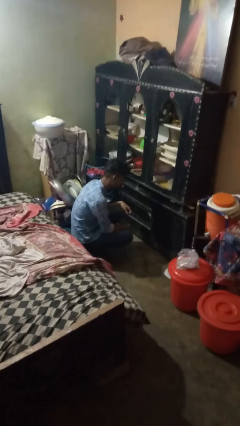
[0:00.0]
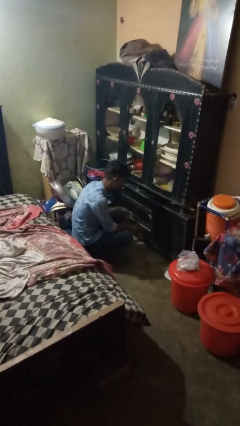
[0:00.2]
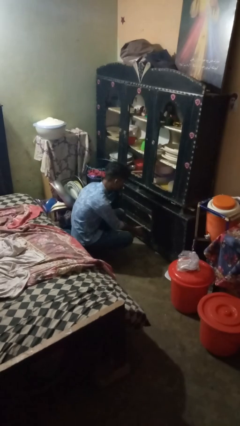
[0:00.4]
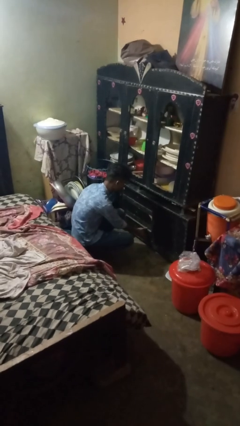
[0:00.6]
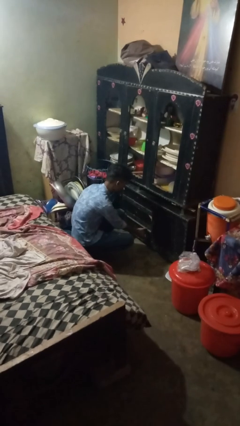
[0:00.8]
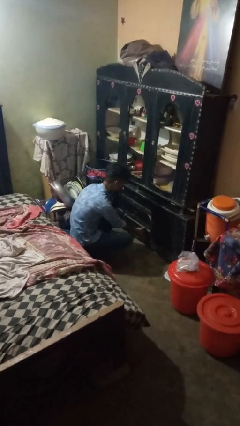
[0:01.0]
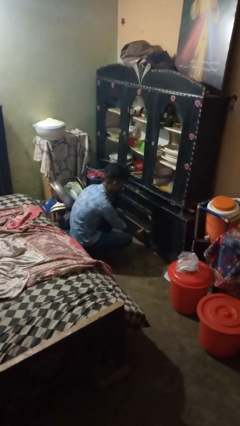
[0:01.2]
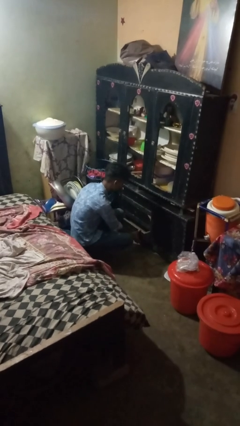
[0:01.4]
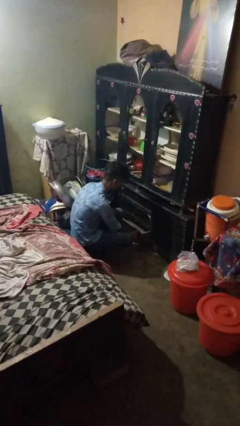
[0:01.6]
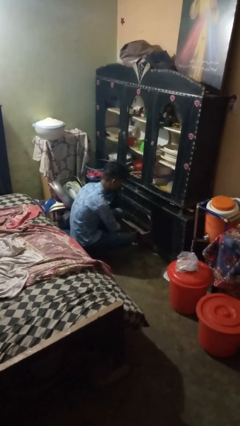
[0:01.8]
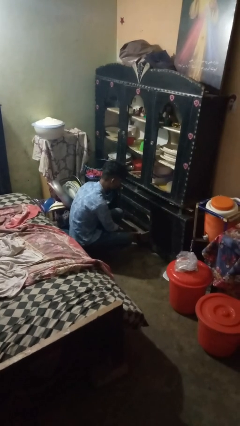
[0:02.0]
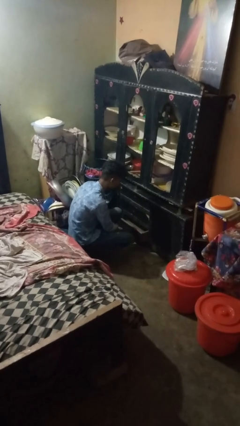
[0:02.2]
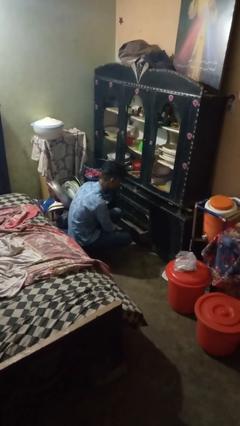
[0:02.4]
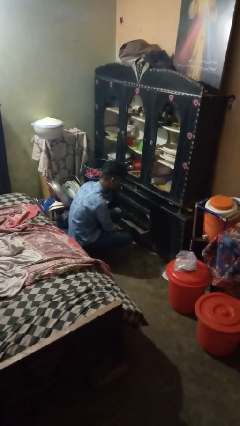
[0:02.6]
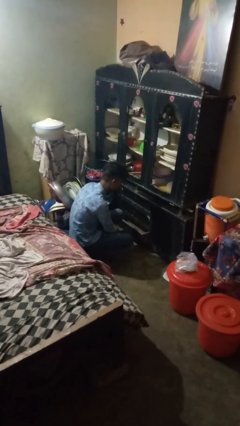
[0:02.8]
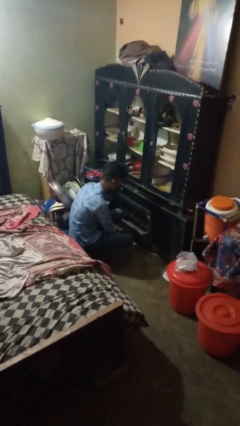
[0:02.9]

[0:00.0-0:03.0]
person opens kitchen drawer

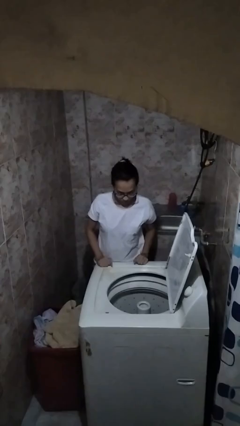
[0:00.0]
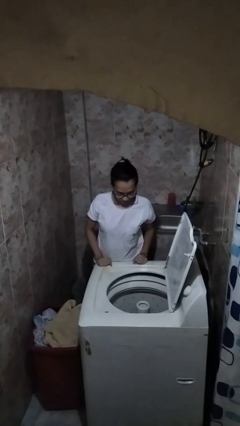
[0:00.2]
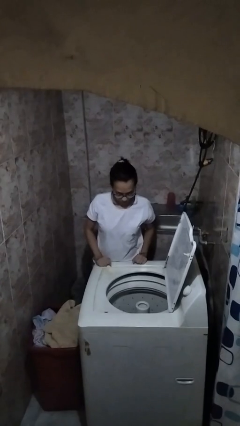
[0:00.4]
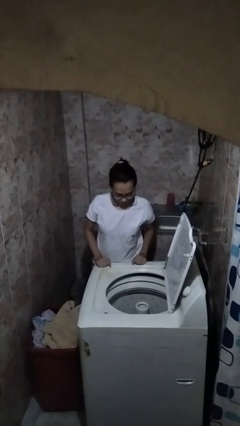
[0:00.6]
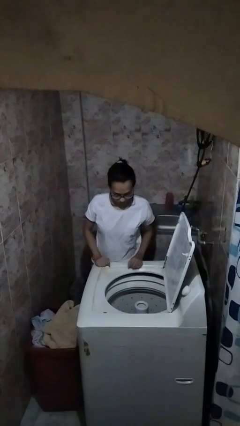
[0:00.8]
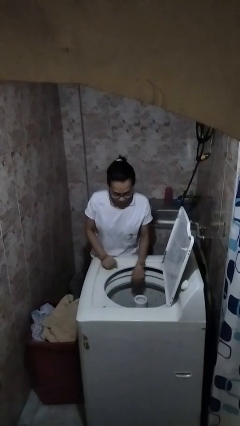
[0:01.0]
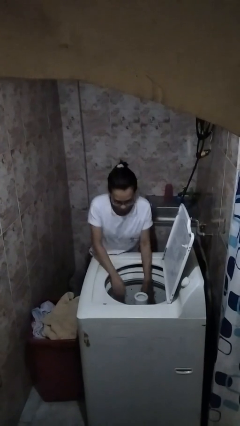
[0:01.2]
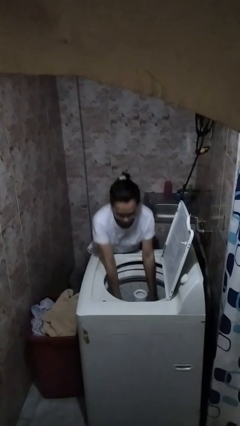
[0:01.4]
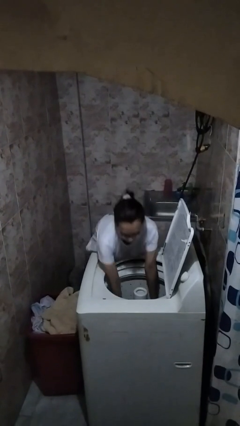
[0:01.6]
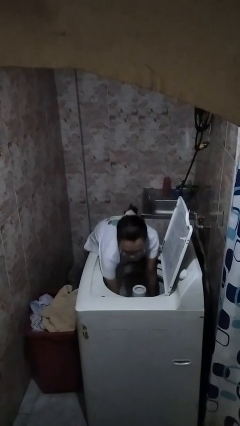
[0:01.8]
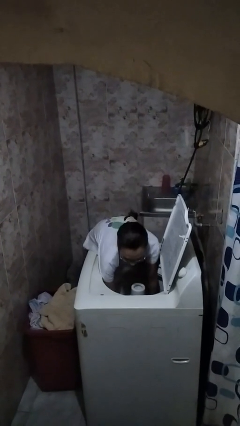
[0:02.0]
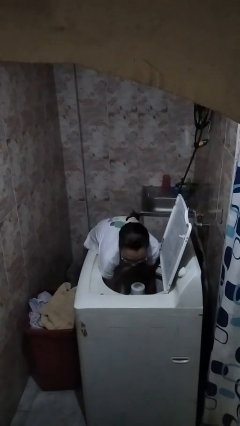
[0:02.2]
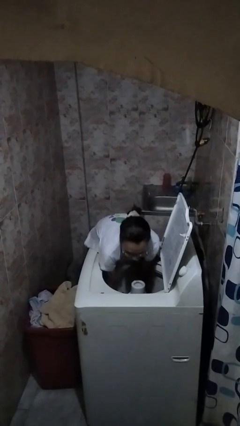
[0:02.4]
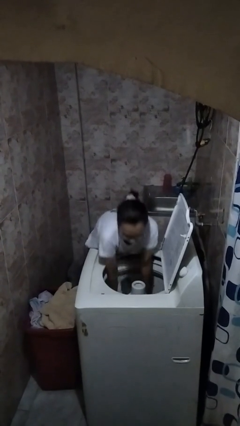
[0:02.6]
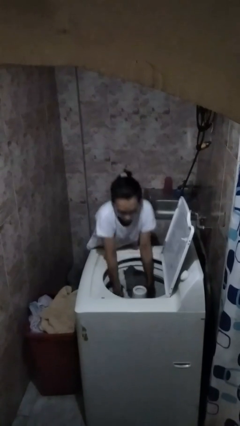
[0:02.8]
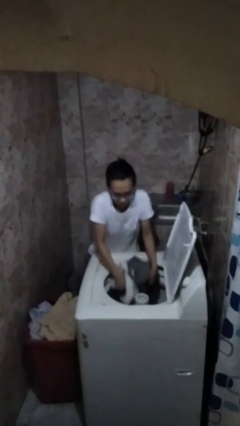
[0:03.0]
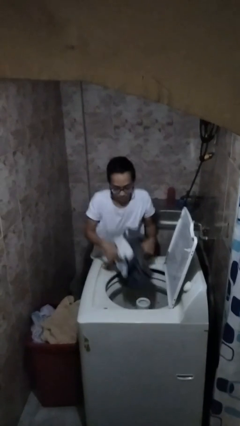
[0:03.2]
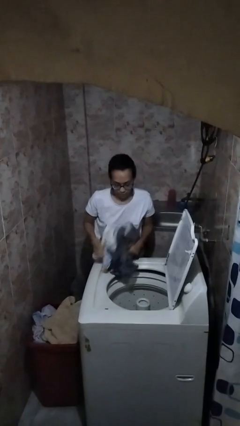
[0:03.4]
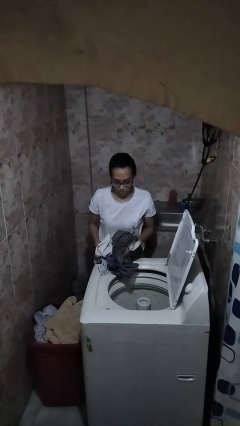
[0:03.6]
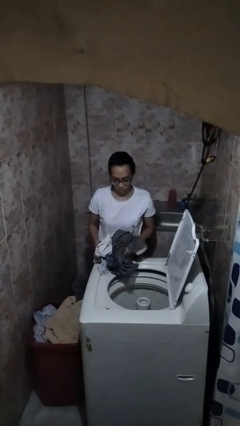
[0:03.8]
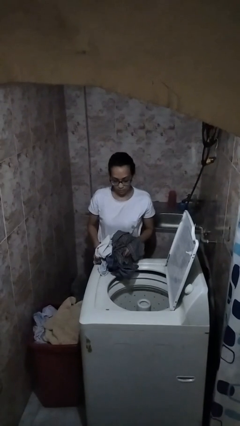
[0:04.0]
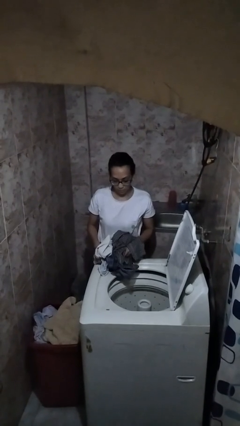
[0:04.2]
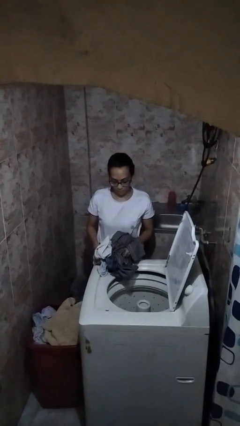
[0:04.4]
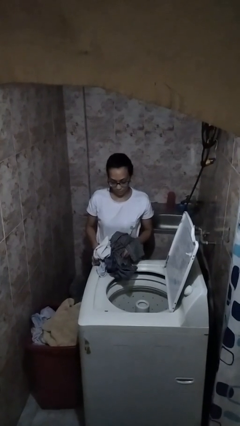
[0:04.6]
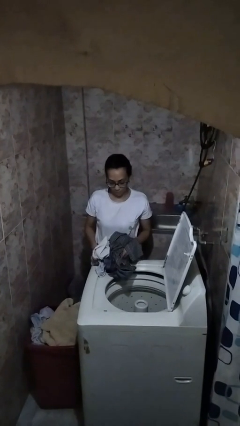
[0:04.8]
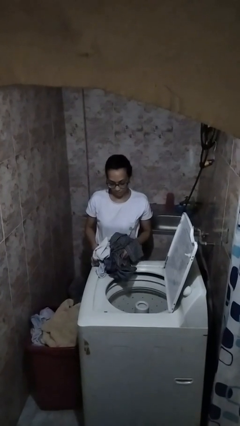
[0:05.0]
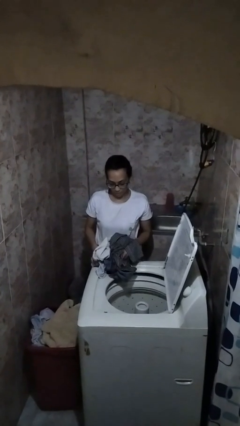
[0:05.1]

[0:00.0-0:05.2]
person loads clotheswasher

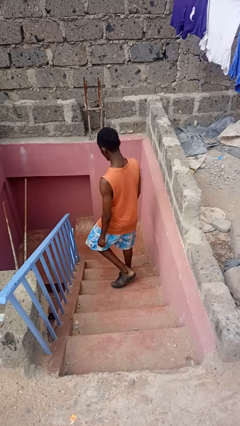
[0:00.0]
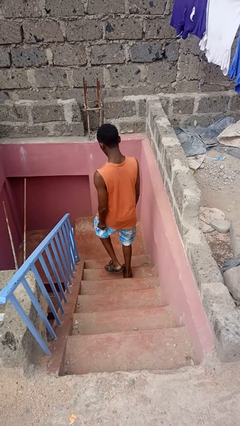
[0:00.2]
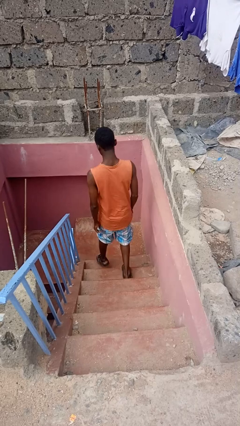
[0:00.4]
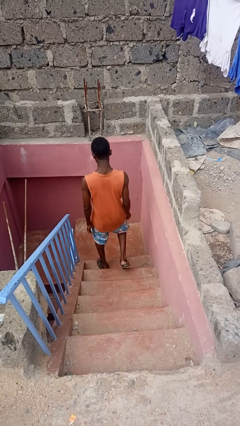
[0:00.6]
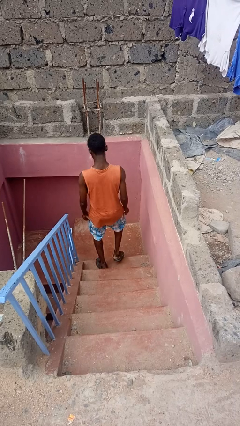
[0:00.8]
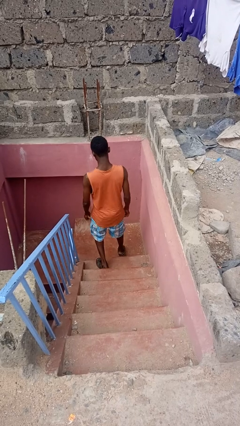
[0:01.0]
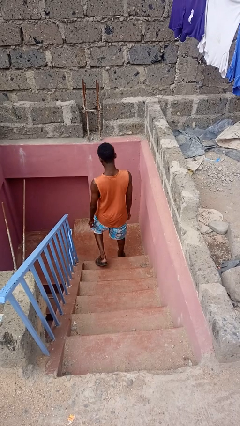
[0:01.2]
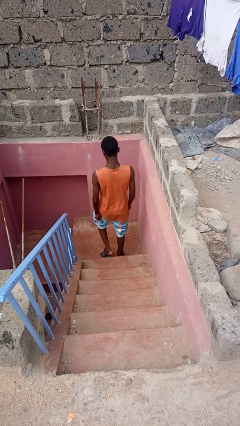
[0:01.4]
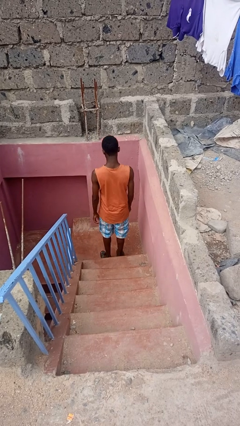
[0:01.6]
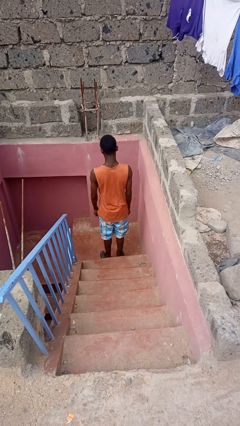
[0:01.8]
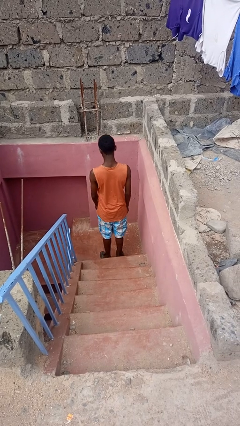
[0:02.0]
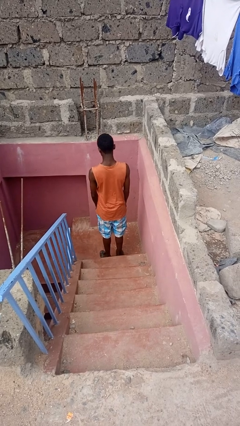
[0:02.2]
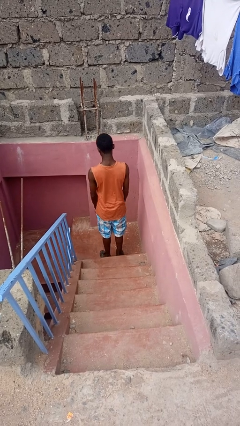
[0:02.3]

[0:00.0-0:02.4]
person climbs down stairs

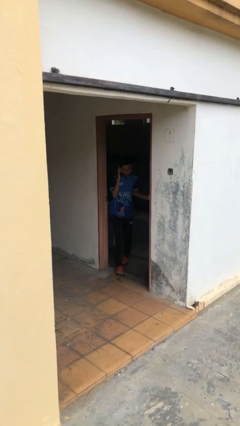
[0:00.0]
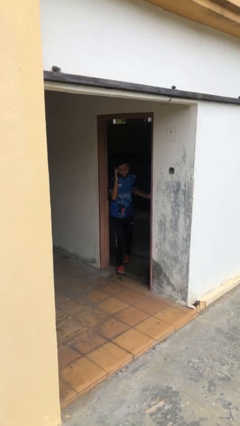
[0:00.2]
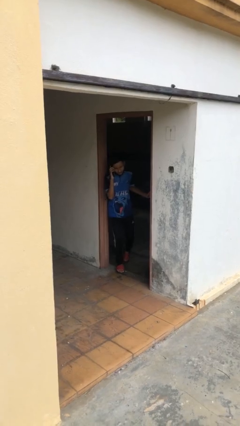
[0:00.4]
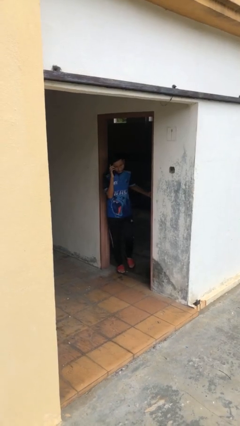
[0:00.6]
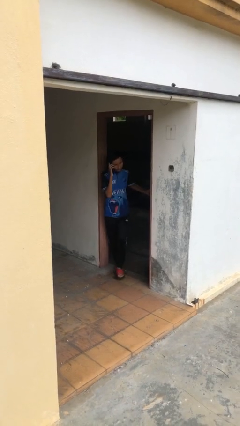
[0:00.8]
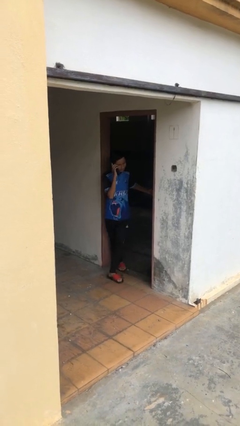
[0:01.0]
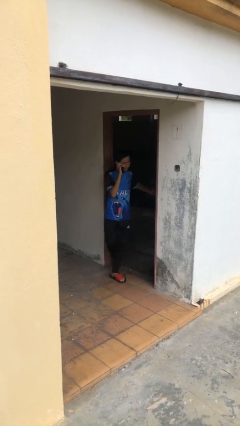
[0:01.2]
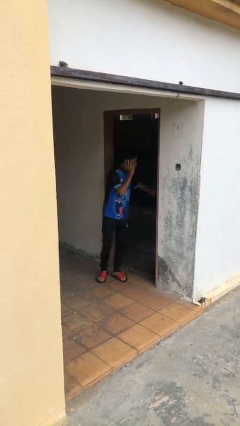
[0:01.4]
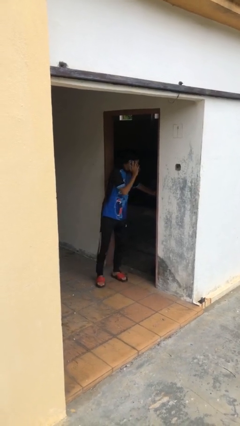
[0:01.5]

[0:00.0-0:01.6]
person enters scene through structure

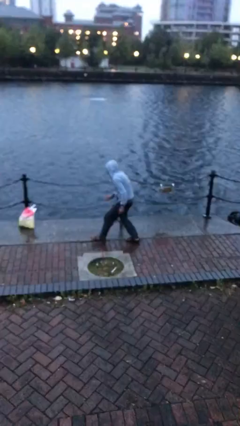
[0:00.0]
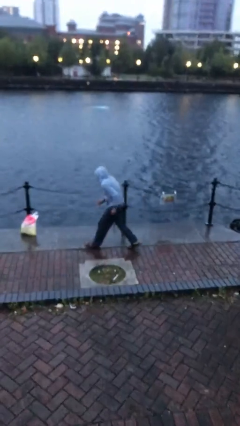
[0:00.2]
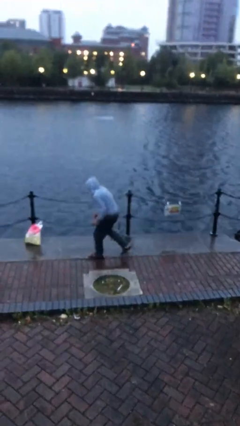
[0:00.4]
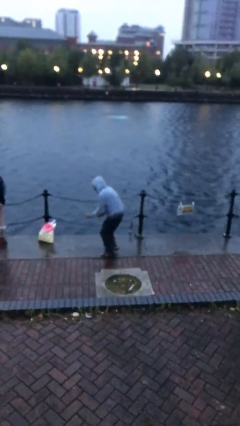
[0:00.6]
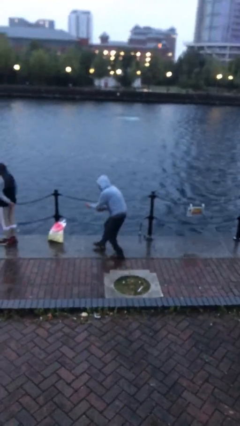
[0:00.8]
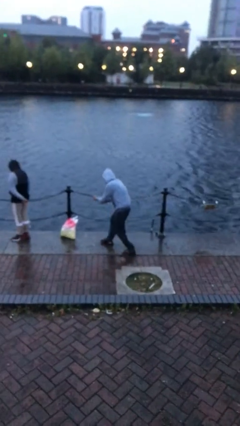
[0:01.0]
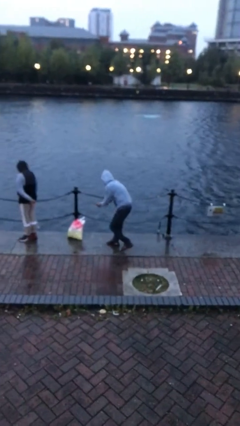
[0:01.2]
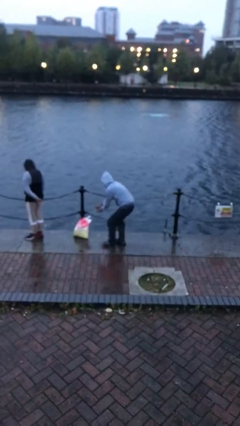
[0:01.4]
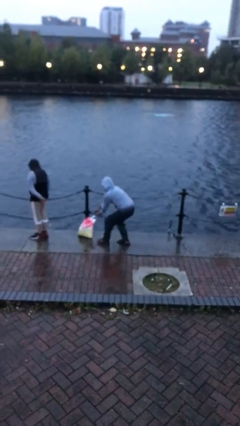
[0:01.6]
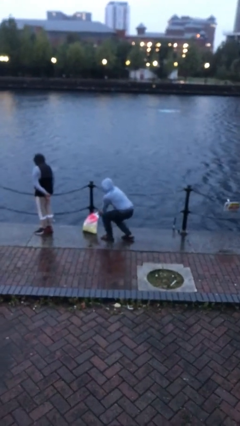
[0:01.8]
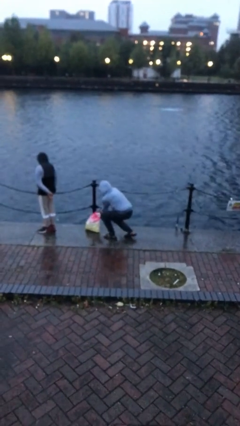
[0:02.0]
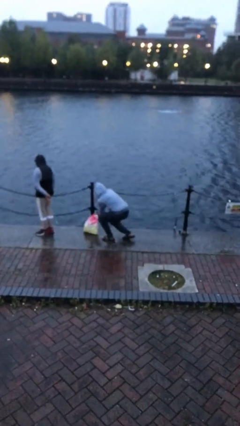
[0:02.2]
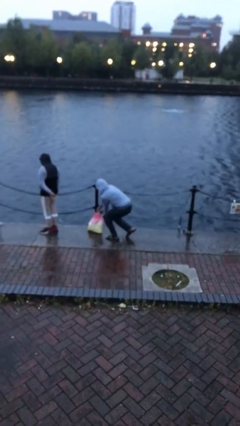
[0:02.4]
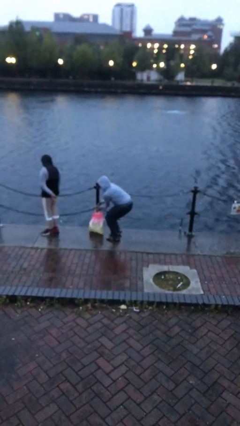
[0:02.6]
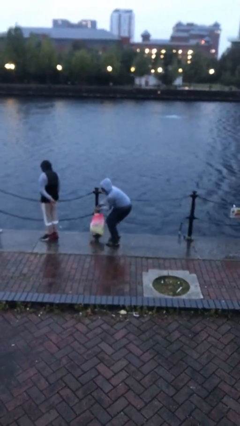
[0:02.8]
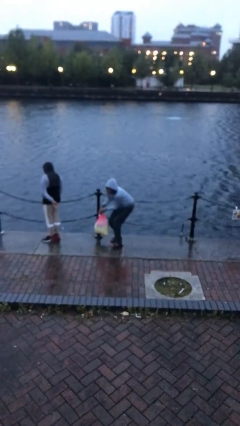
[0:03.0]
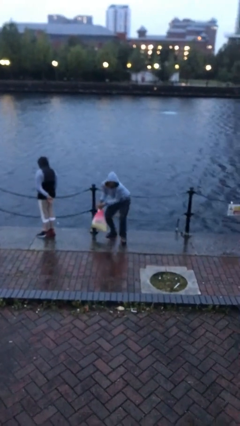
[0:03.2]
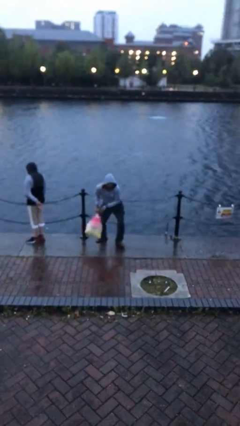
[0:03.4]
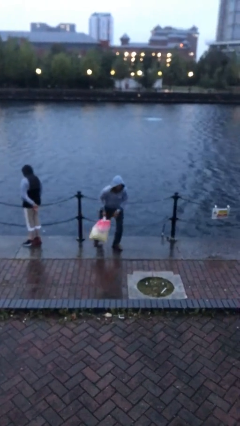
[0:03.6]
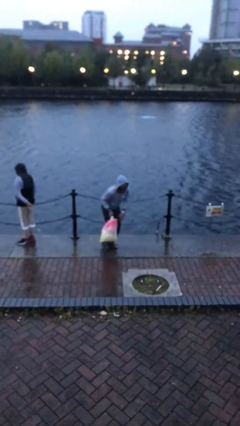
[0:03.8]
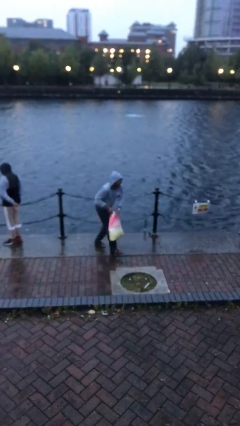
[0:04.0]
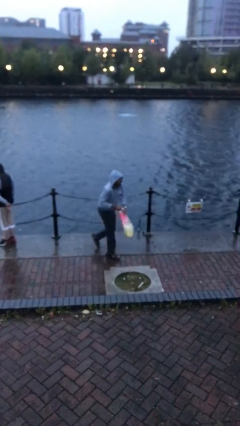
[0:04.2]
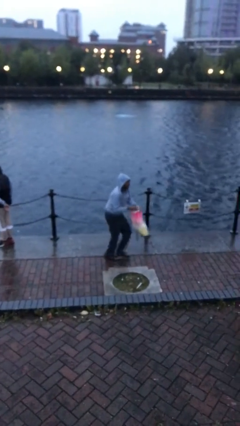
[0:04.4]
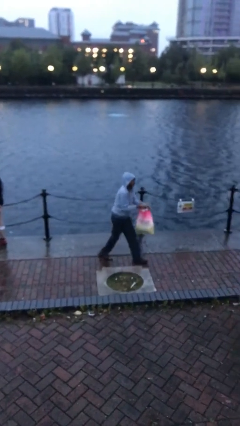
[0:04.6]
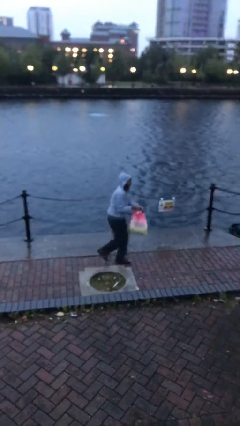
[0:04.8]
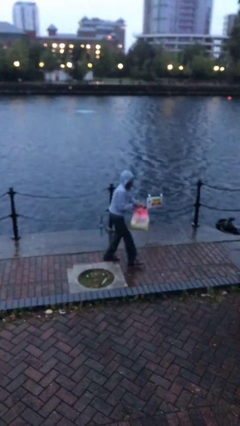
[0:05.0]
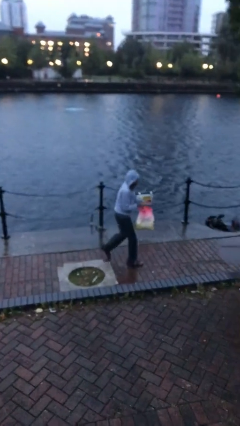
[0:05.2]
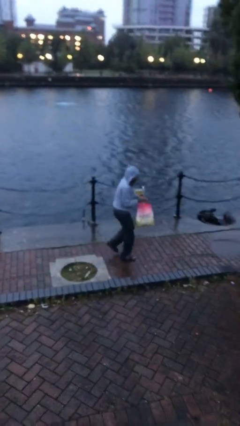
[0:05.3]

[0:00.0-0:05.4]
person steals object from person
